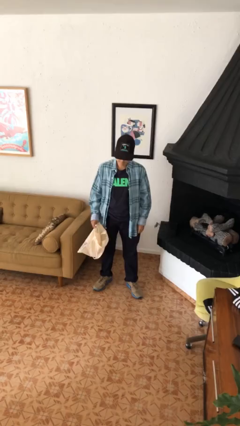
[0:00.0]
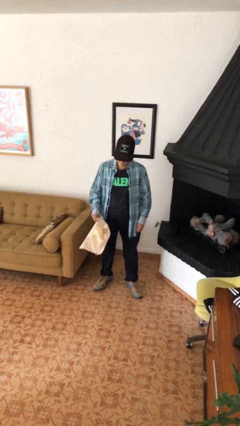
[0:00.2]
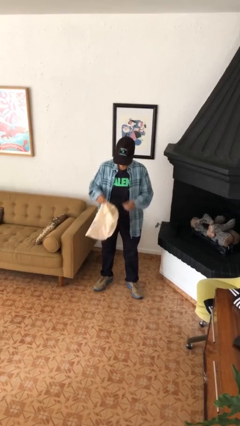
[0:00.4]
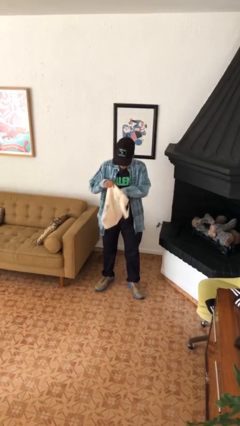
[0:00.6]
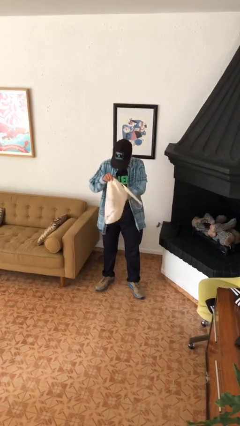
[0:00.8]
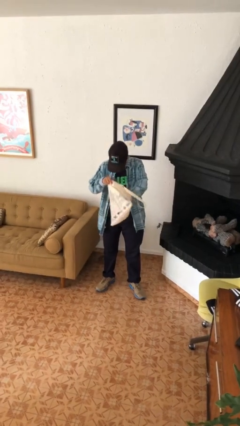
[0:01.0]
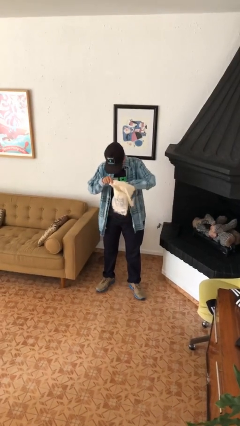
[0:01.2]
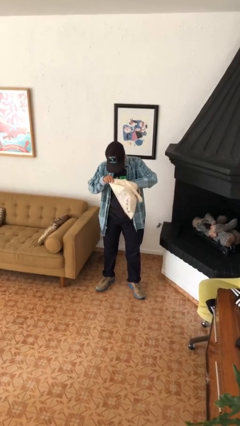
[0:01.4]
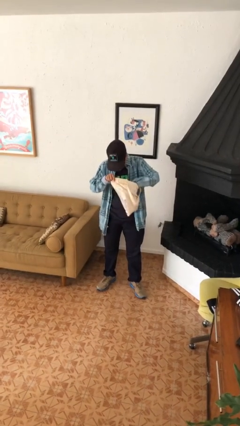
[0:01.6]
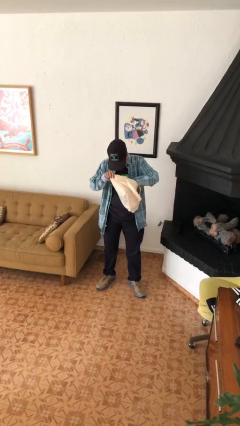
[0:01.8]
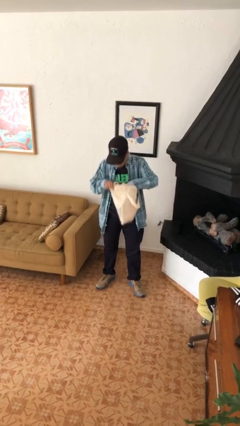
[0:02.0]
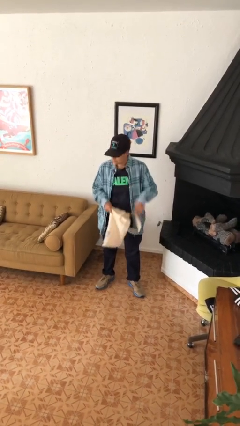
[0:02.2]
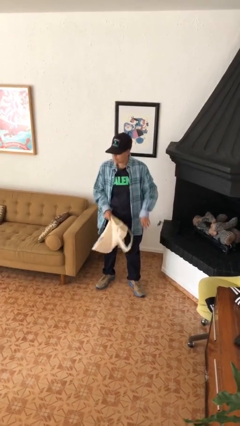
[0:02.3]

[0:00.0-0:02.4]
person searches in bag

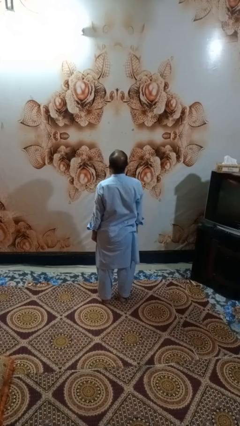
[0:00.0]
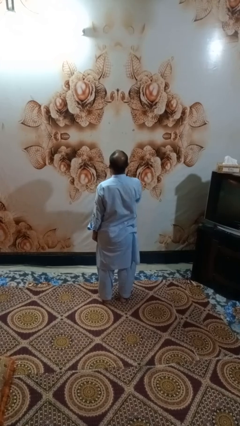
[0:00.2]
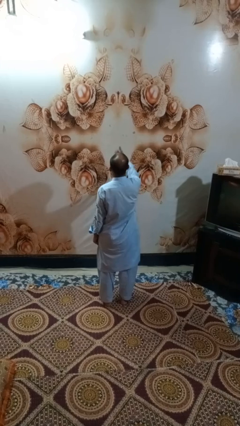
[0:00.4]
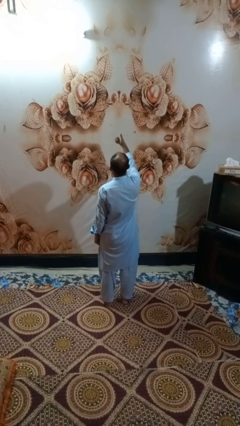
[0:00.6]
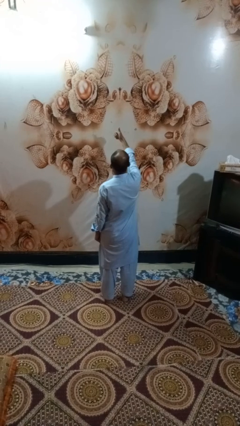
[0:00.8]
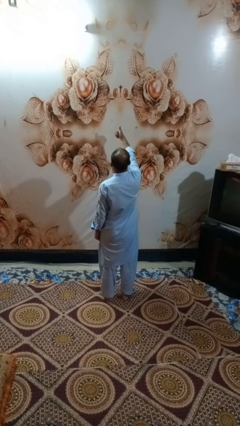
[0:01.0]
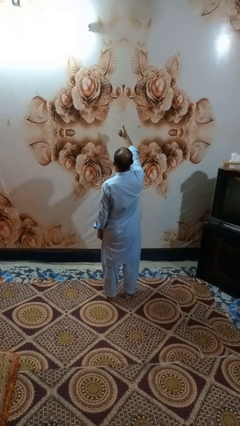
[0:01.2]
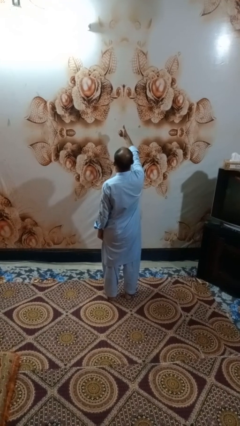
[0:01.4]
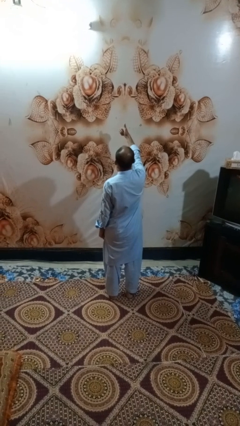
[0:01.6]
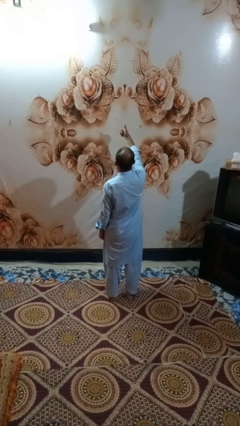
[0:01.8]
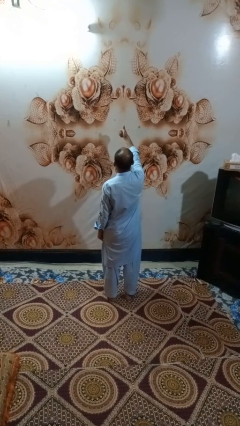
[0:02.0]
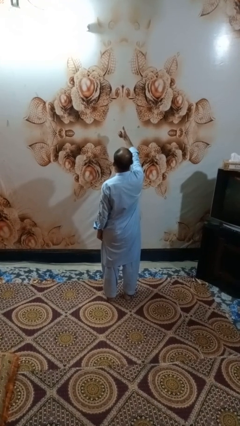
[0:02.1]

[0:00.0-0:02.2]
person gestures thumbs up

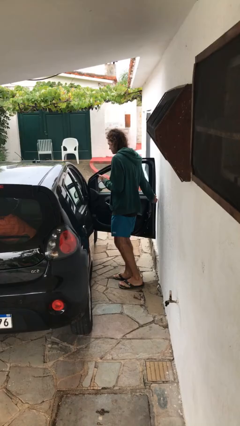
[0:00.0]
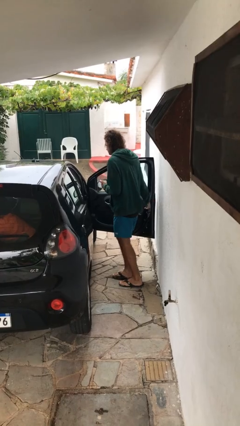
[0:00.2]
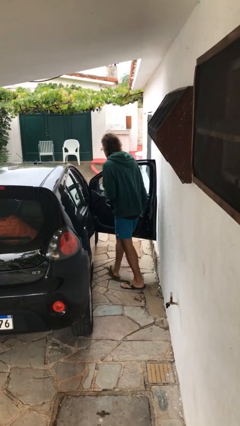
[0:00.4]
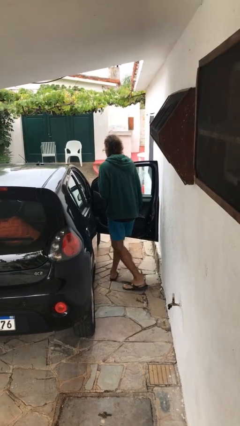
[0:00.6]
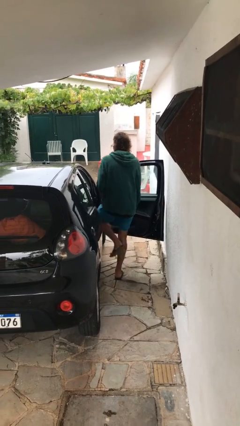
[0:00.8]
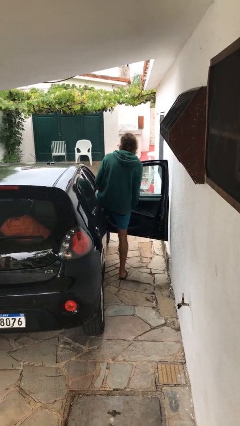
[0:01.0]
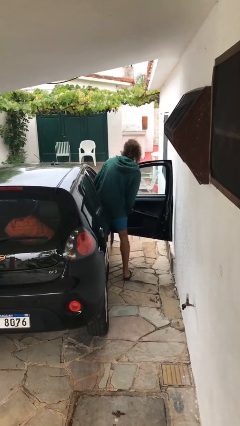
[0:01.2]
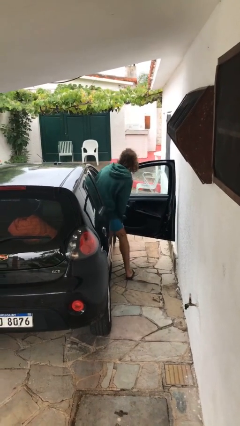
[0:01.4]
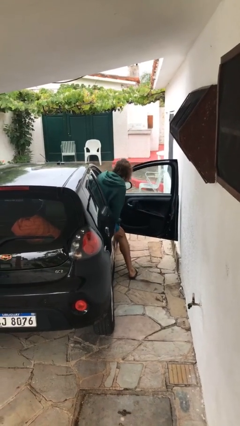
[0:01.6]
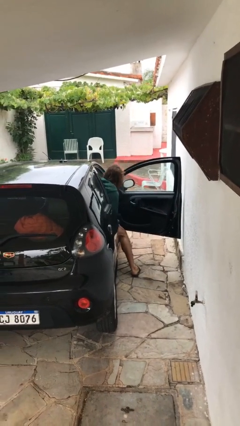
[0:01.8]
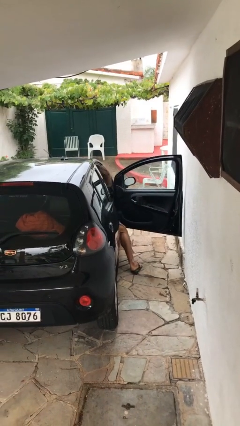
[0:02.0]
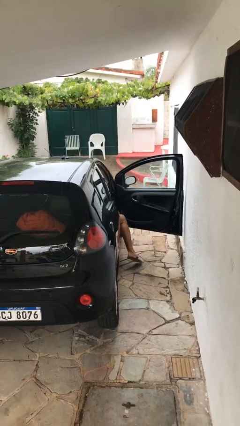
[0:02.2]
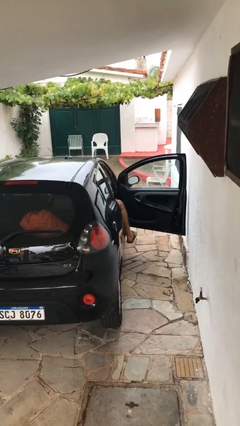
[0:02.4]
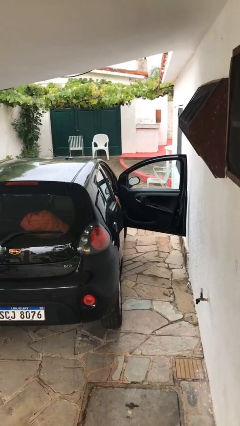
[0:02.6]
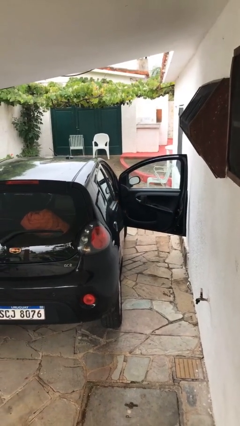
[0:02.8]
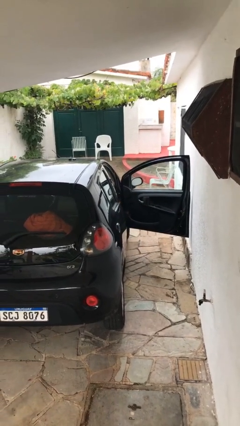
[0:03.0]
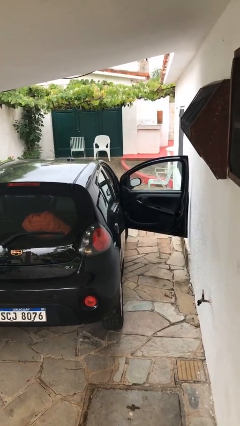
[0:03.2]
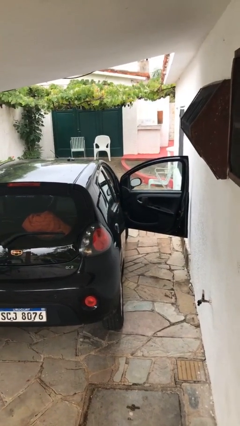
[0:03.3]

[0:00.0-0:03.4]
person enters car

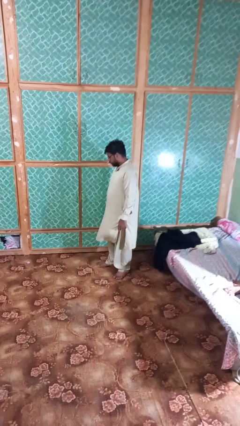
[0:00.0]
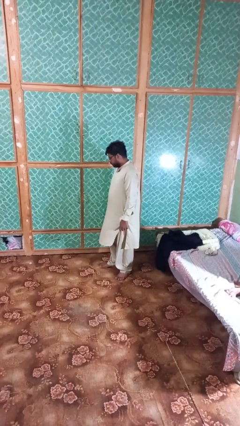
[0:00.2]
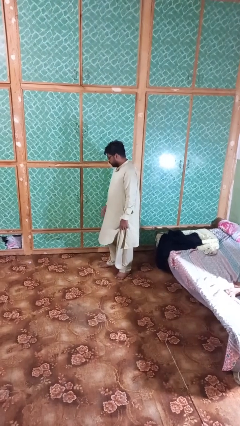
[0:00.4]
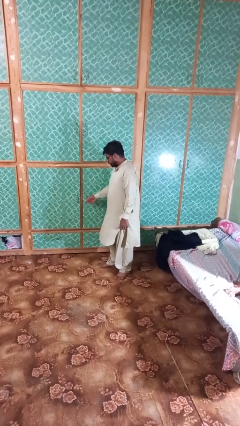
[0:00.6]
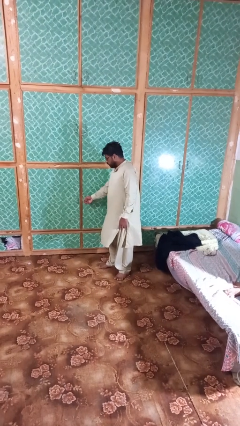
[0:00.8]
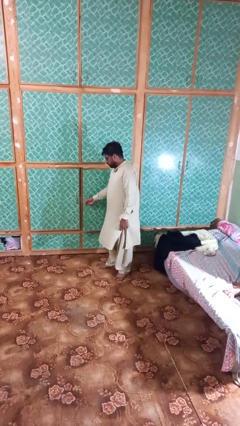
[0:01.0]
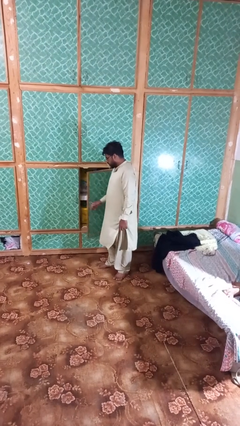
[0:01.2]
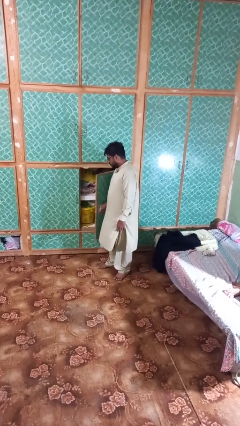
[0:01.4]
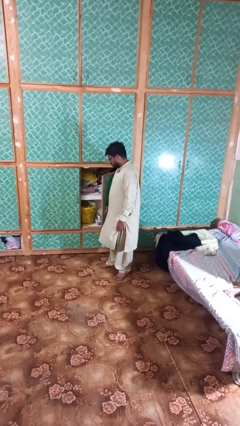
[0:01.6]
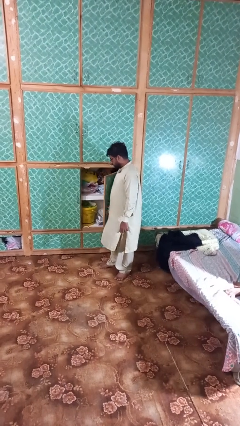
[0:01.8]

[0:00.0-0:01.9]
person opens closet door

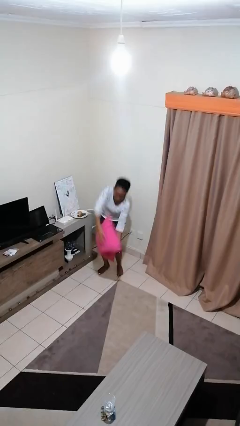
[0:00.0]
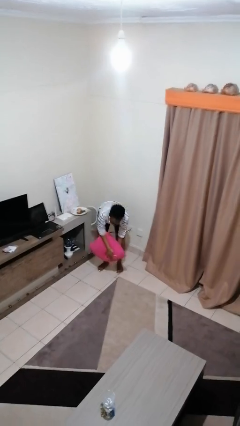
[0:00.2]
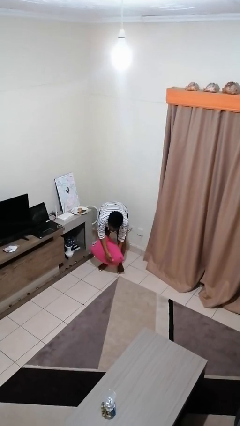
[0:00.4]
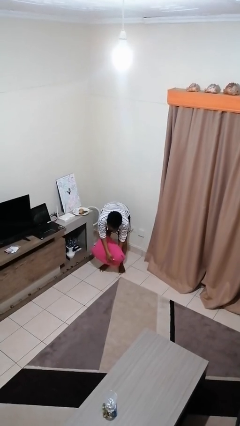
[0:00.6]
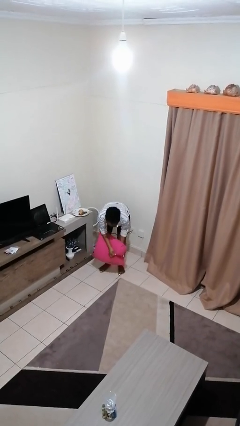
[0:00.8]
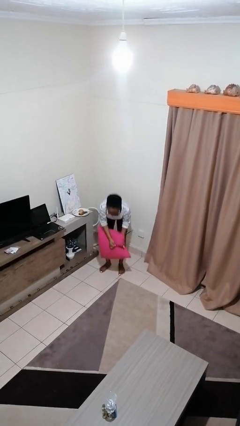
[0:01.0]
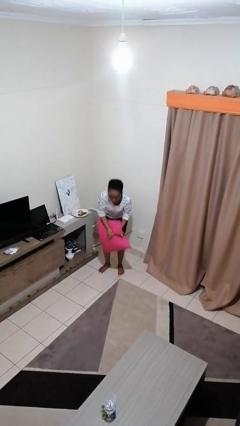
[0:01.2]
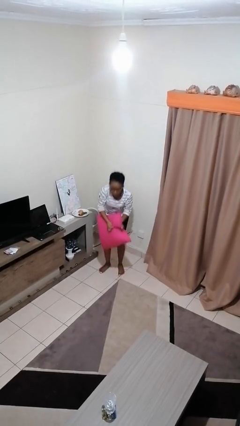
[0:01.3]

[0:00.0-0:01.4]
person catches dropped object

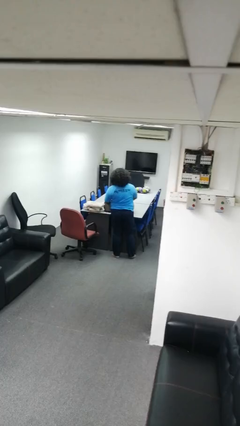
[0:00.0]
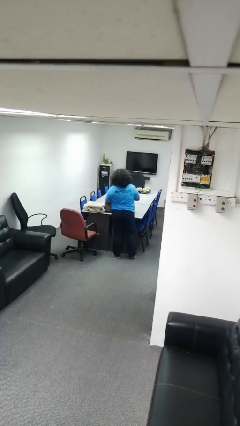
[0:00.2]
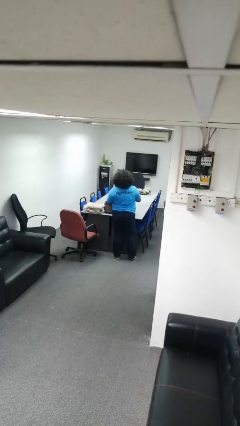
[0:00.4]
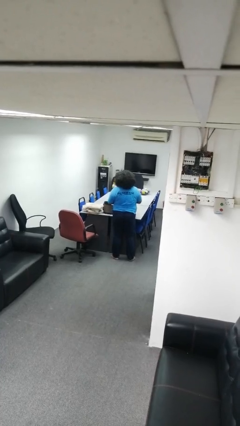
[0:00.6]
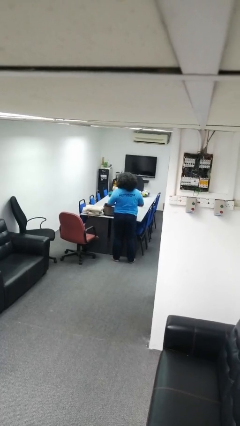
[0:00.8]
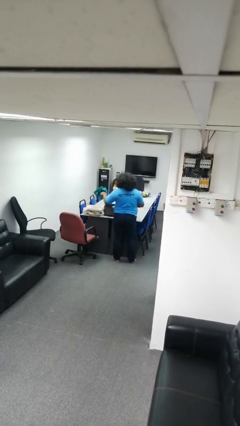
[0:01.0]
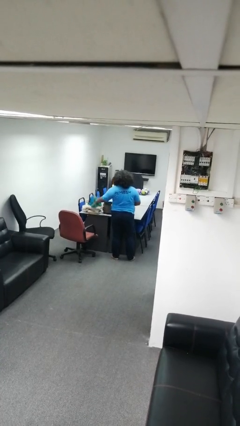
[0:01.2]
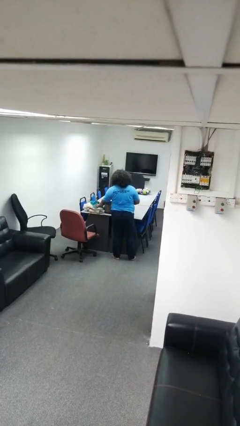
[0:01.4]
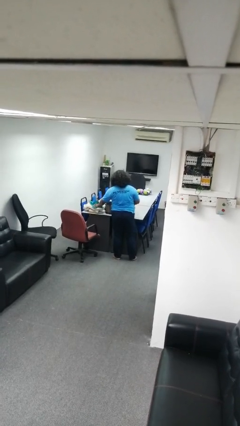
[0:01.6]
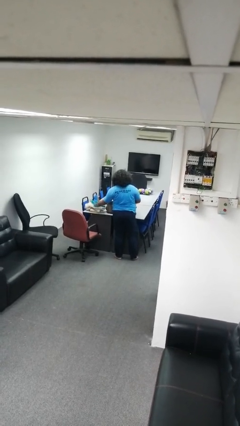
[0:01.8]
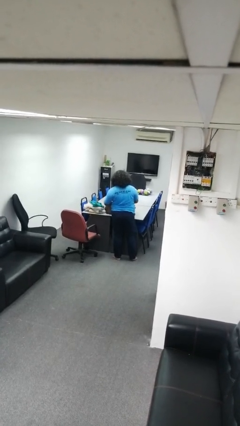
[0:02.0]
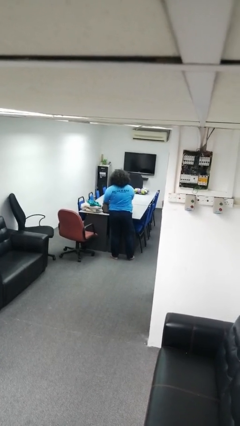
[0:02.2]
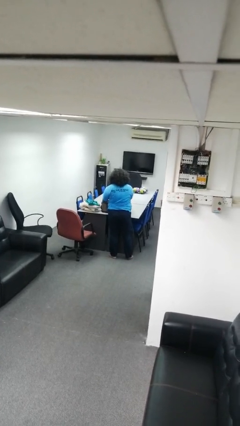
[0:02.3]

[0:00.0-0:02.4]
person unloads clothes from suitcase

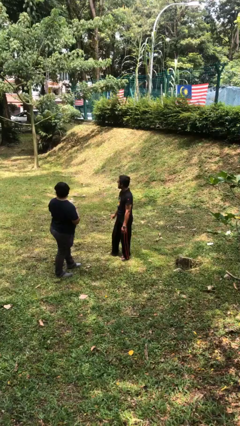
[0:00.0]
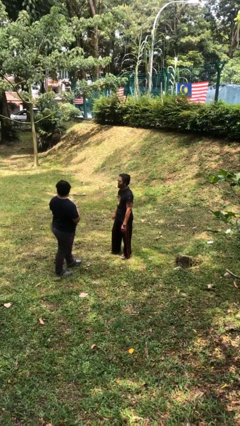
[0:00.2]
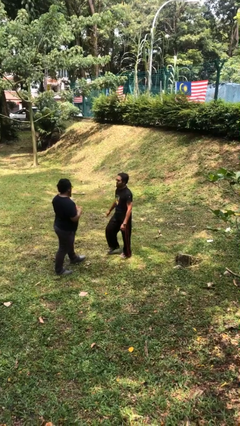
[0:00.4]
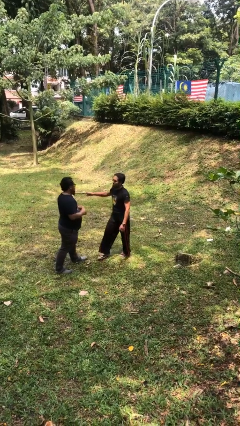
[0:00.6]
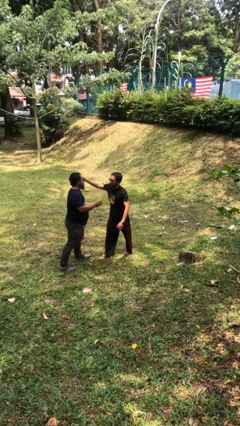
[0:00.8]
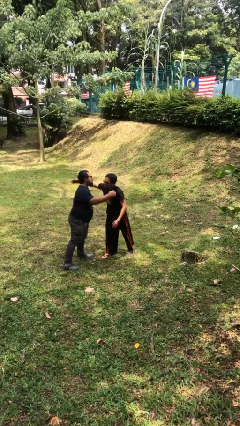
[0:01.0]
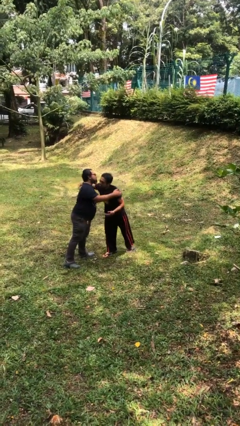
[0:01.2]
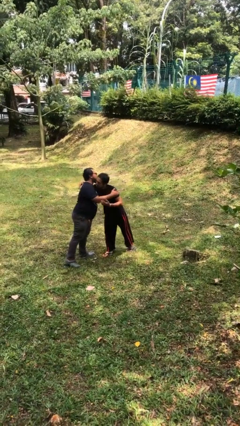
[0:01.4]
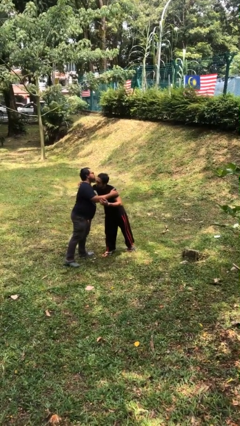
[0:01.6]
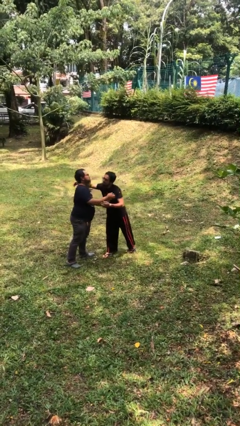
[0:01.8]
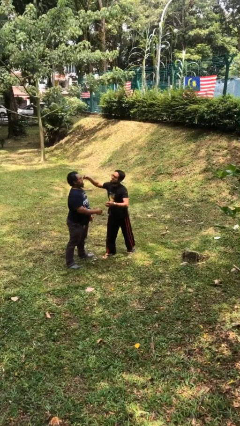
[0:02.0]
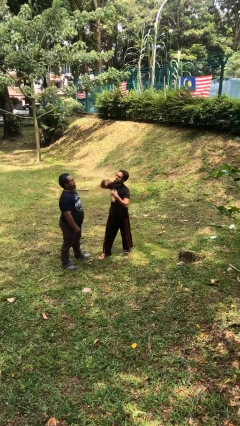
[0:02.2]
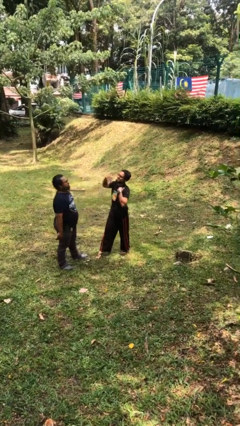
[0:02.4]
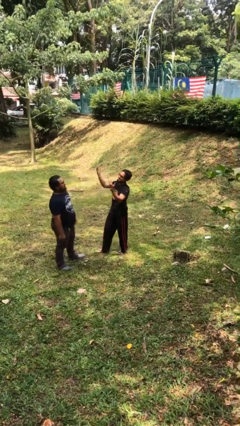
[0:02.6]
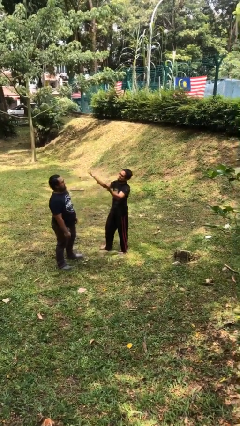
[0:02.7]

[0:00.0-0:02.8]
person embraces person

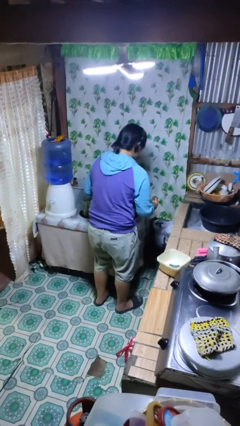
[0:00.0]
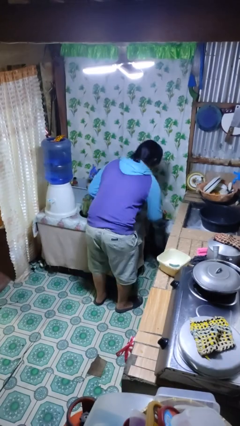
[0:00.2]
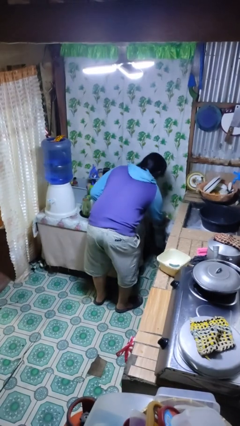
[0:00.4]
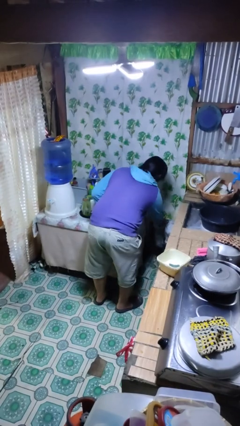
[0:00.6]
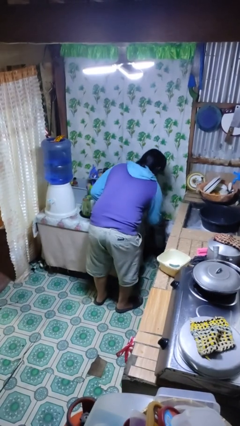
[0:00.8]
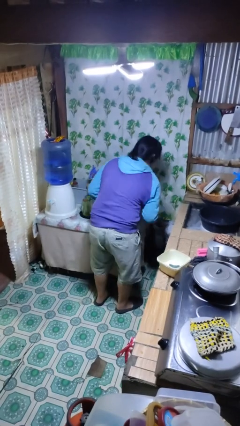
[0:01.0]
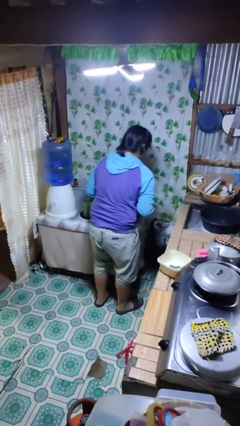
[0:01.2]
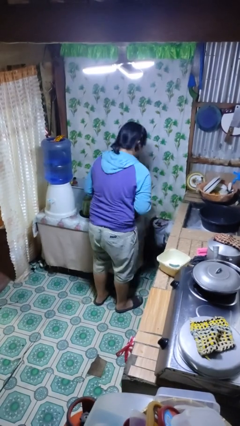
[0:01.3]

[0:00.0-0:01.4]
person discards trash
